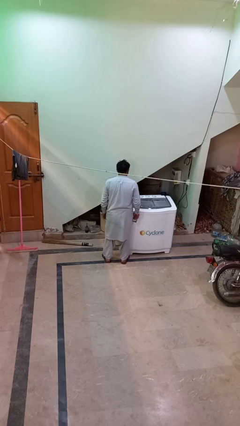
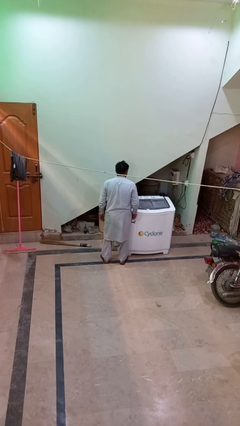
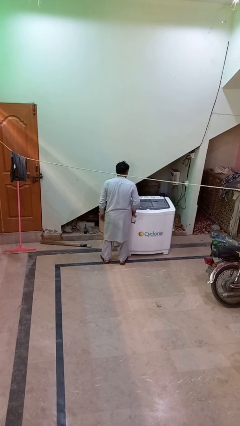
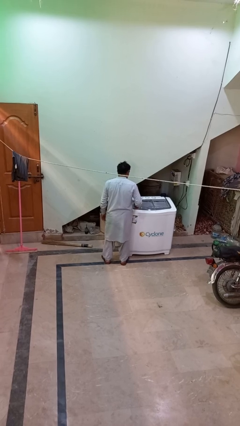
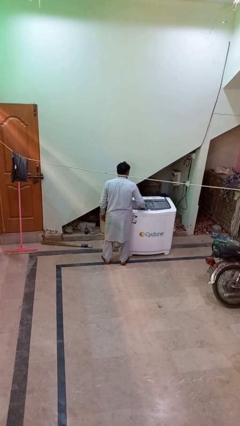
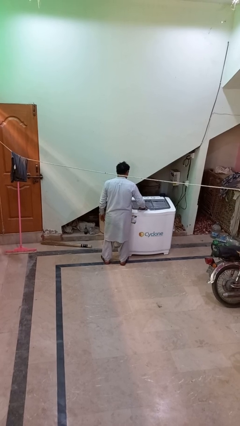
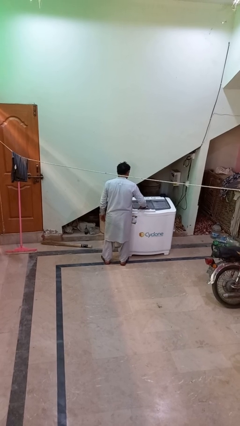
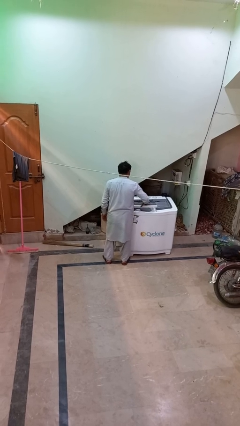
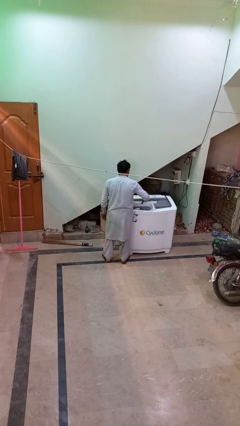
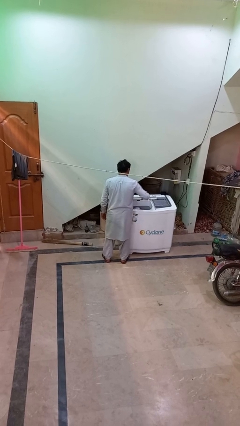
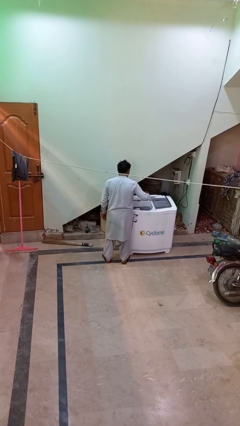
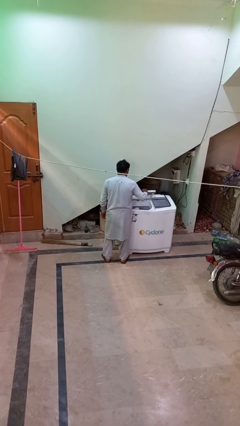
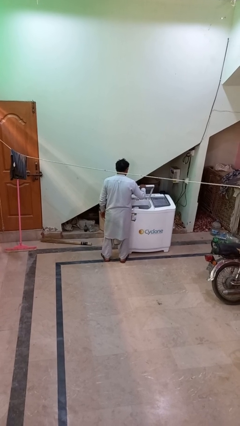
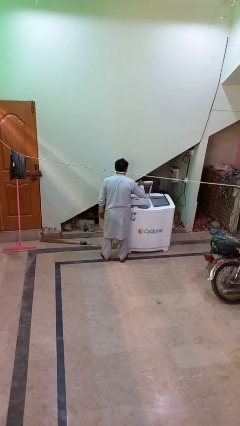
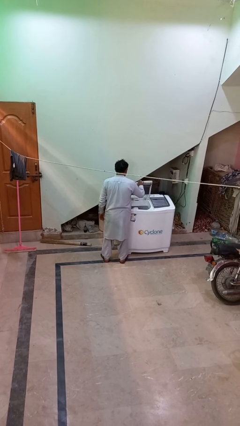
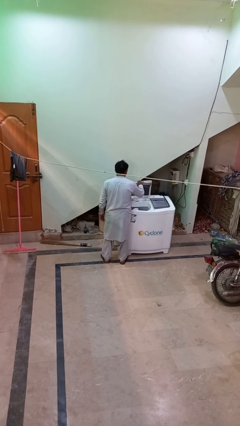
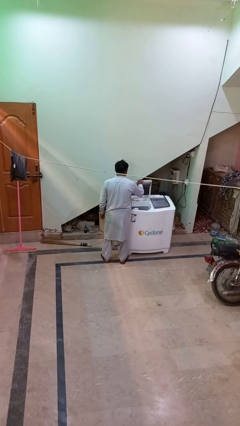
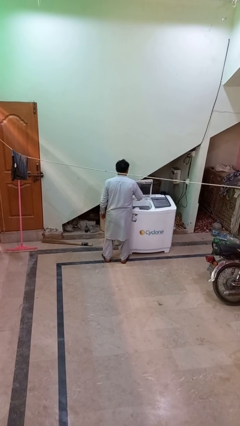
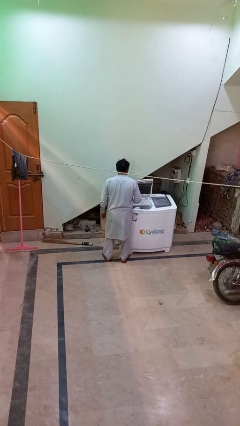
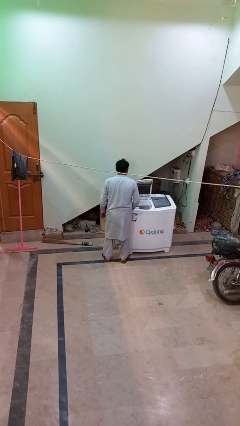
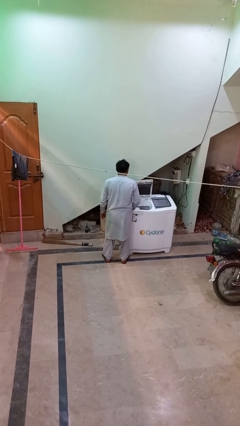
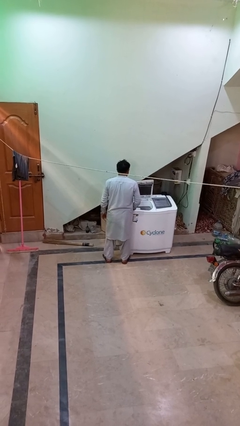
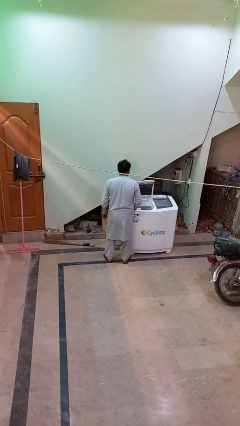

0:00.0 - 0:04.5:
person opens clothes washer

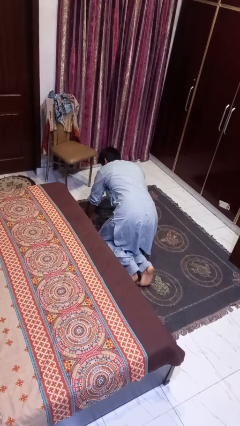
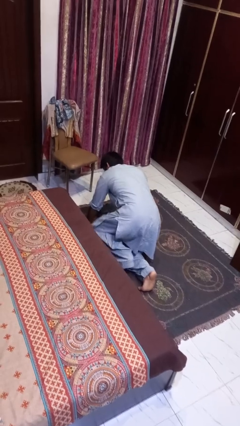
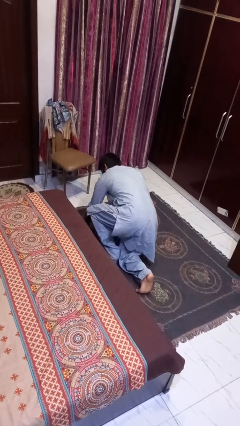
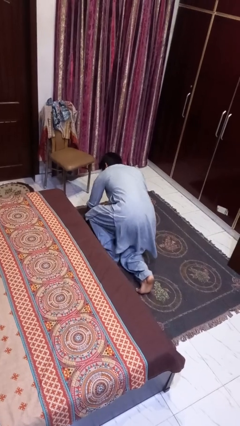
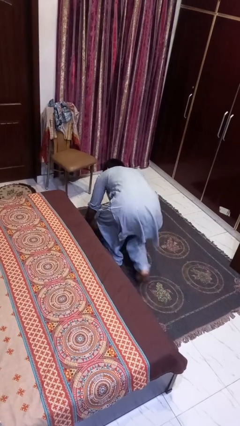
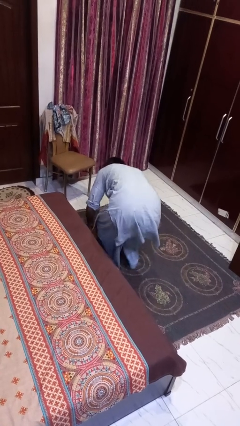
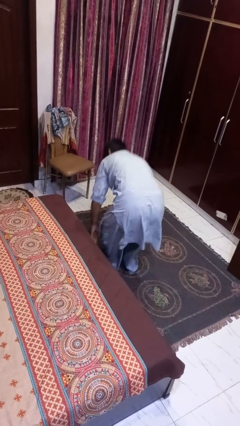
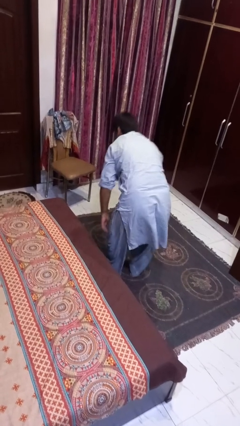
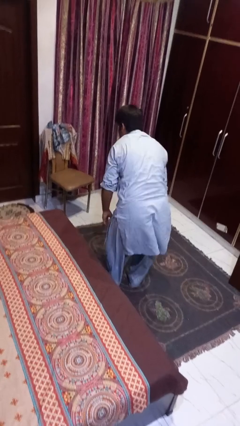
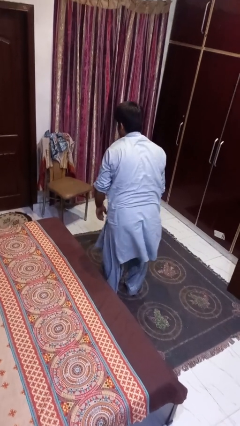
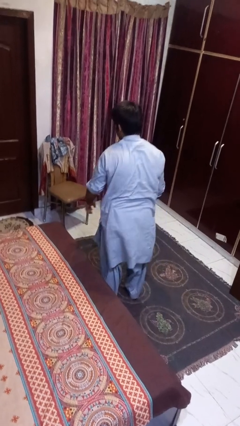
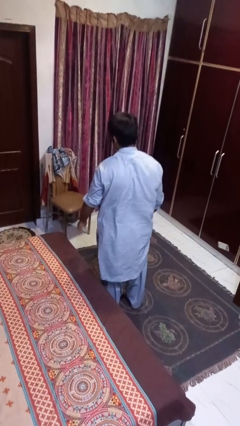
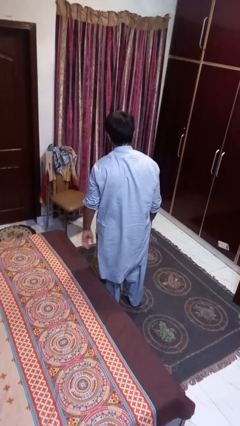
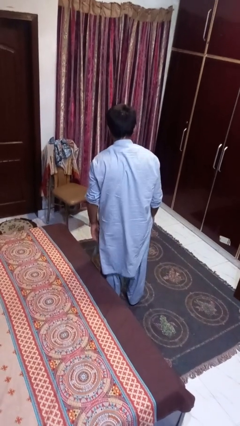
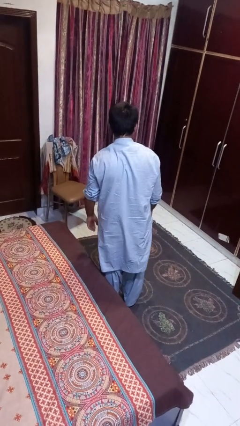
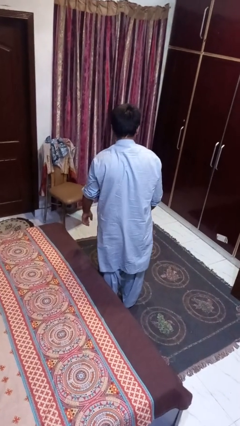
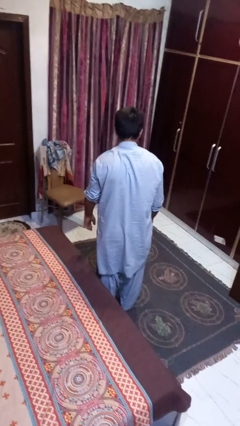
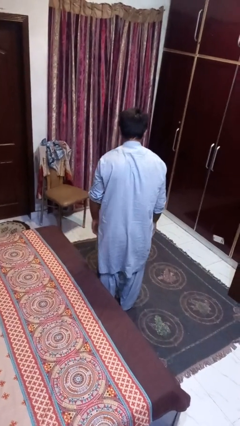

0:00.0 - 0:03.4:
person stands up from floor

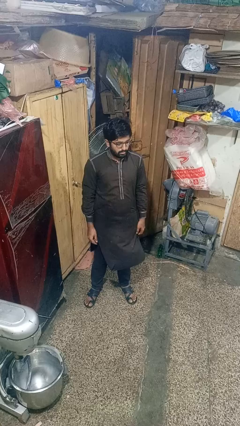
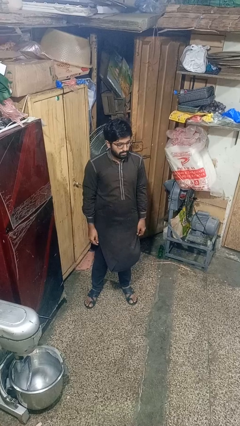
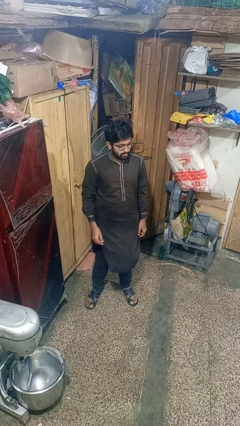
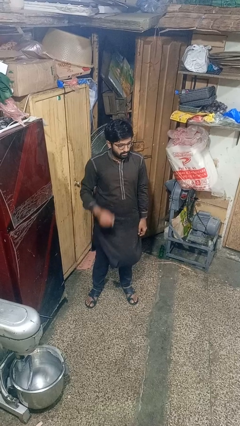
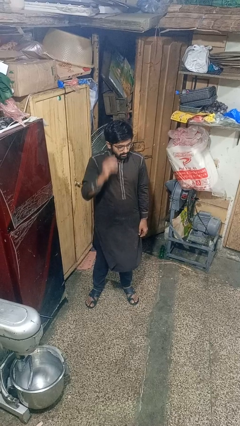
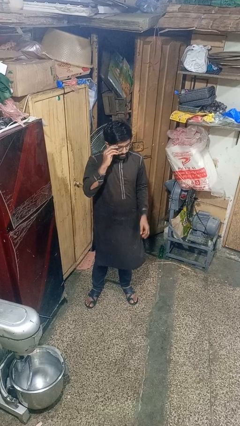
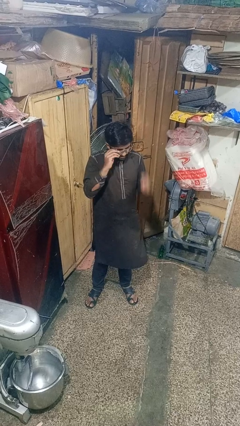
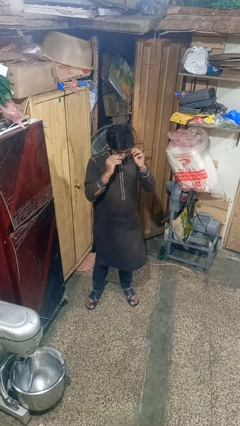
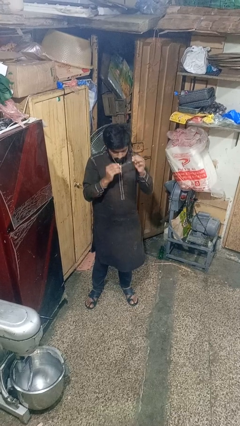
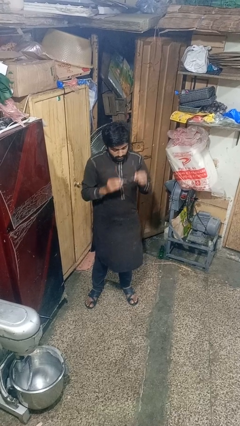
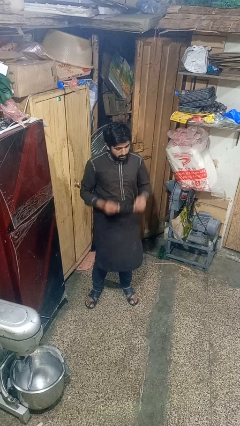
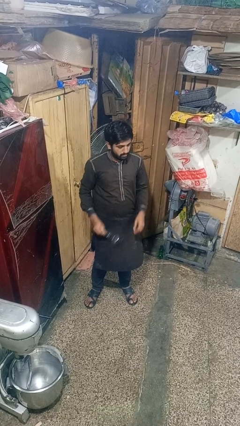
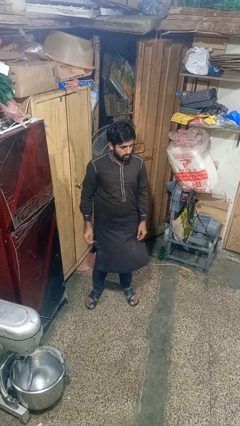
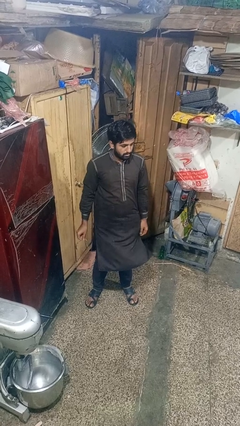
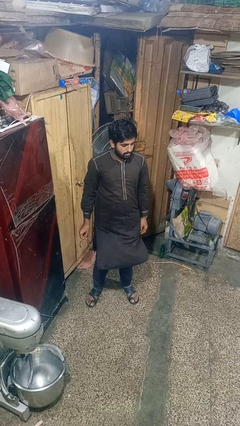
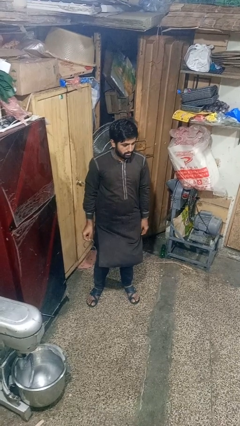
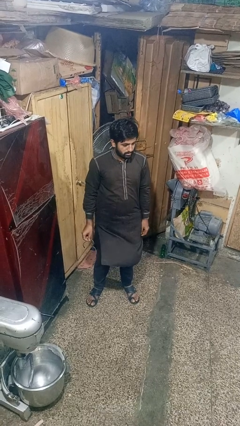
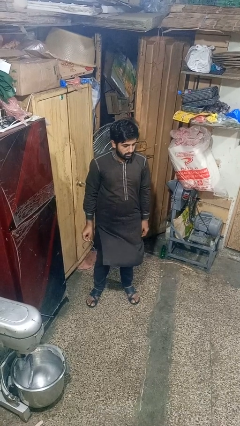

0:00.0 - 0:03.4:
person takes off glasses

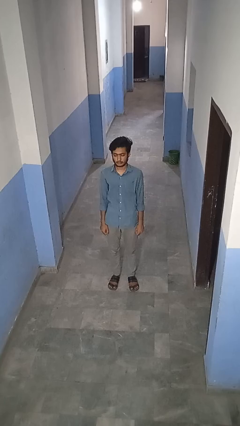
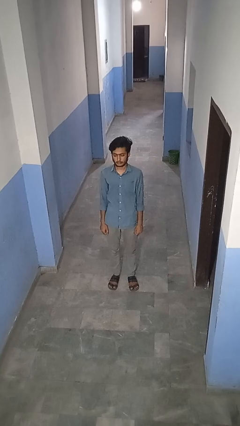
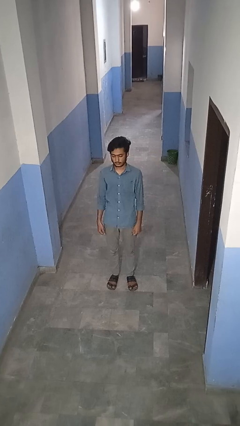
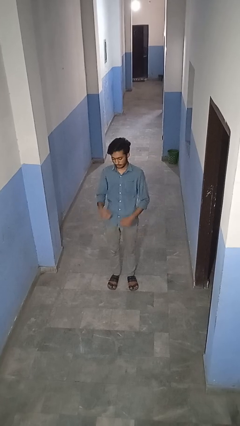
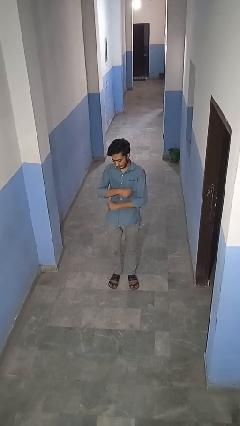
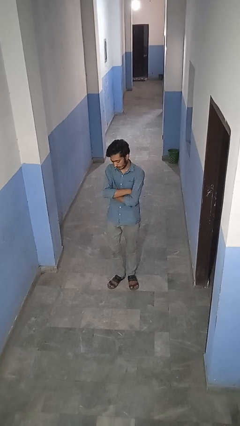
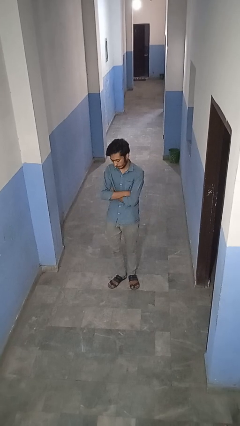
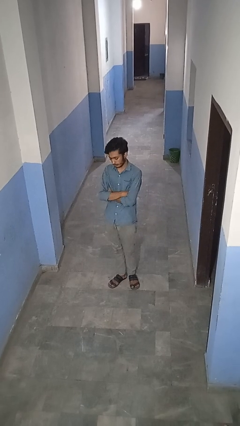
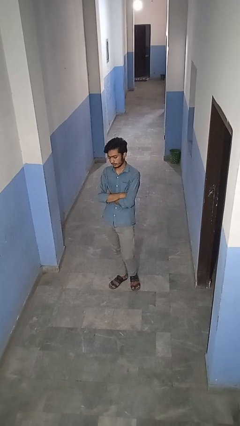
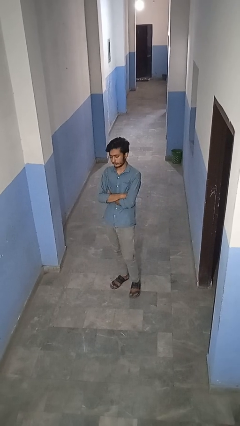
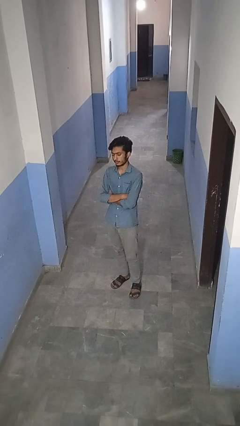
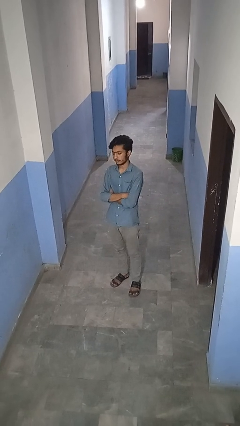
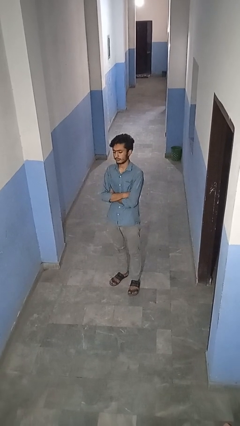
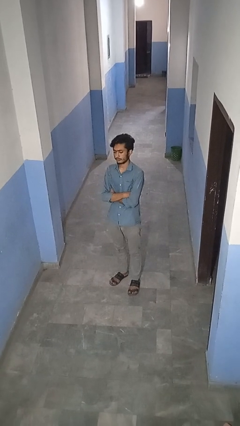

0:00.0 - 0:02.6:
person crosses arms

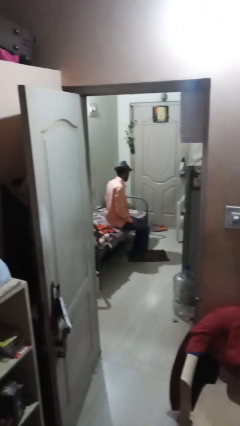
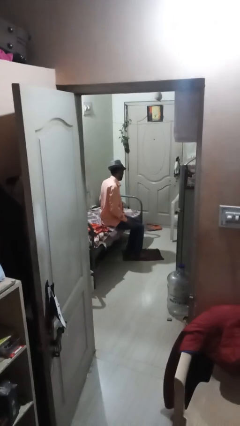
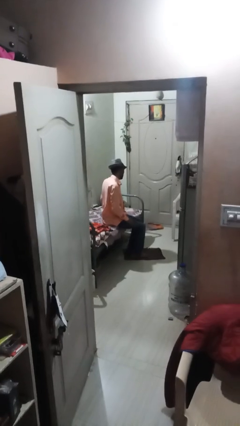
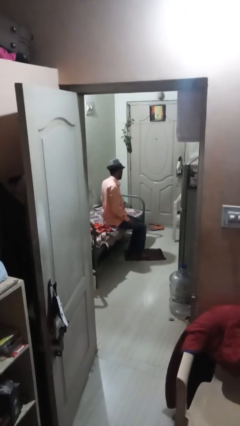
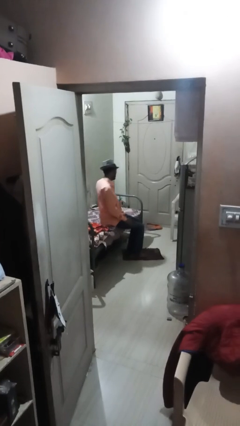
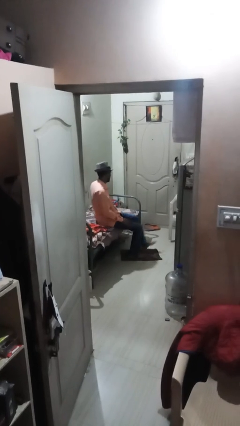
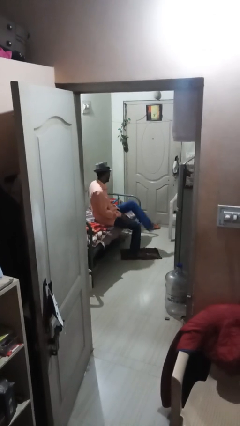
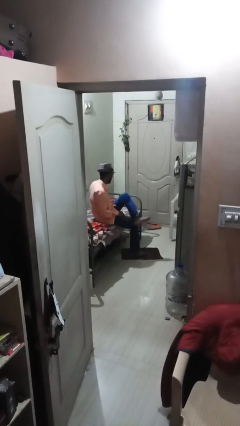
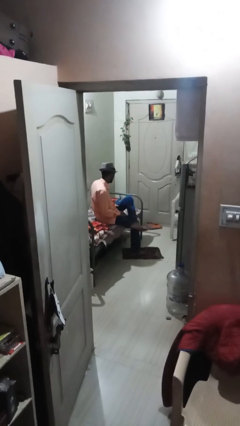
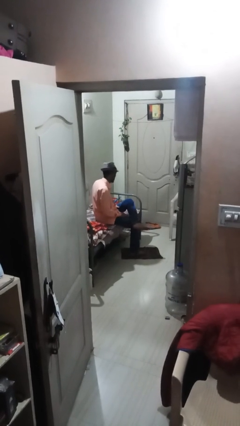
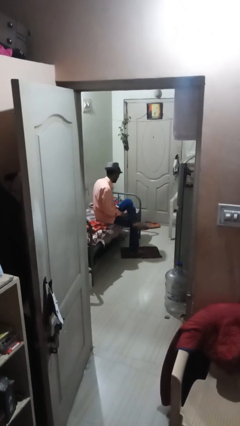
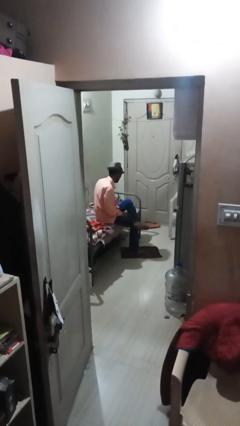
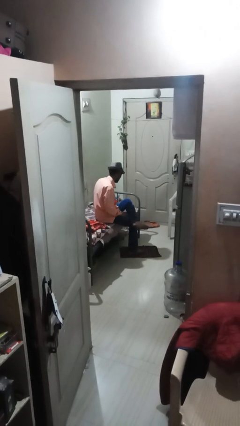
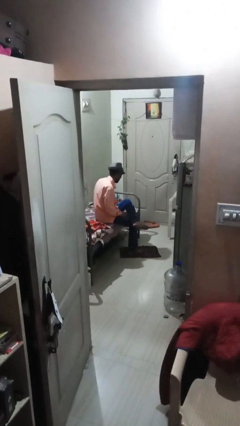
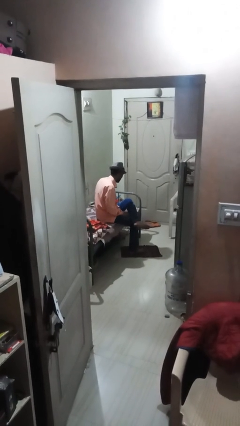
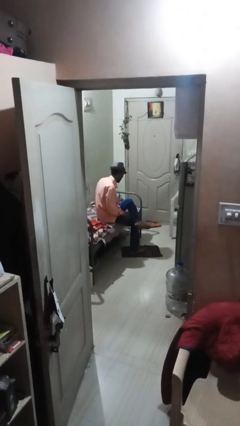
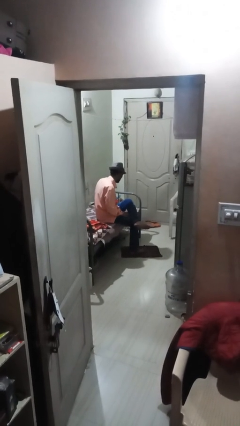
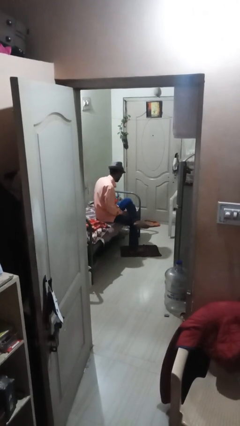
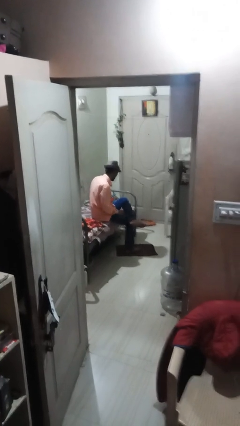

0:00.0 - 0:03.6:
person crosses legs
